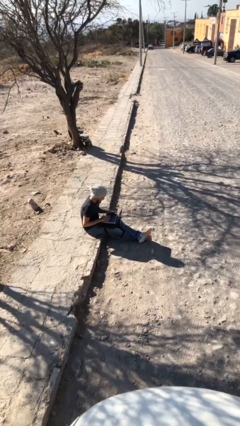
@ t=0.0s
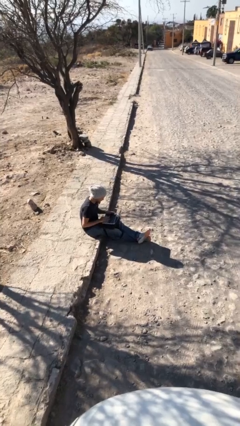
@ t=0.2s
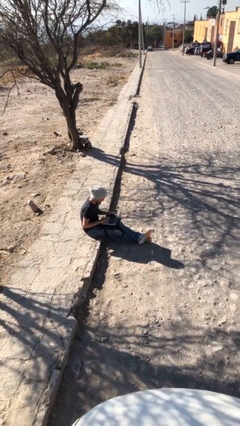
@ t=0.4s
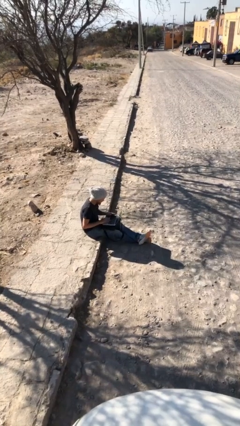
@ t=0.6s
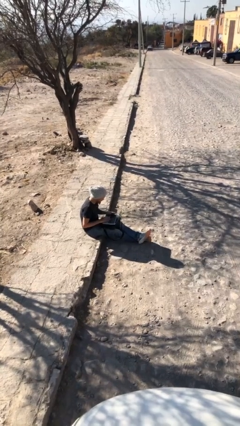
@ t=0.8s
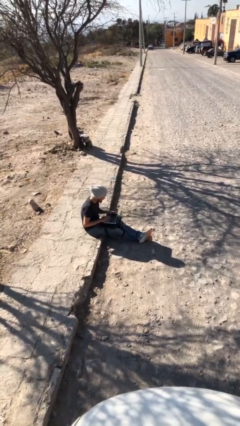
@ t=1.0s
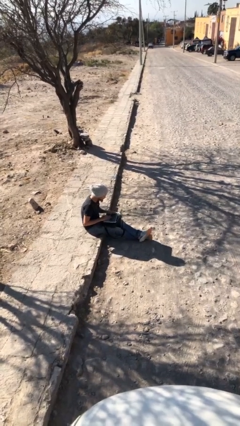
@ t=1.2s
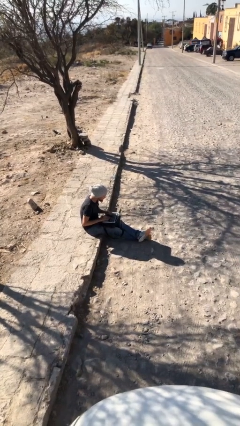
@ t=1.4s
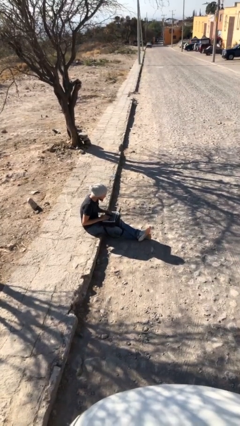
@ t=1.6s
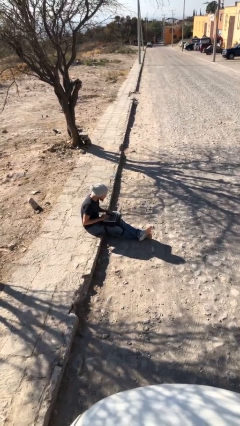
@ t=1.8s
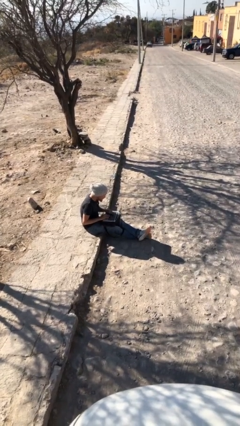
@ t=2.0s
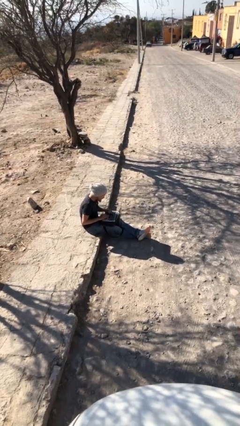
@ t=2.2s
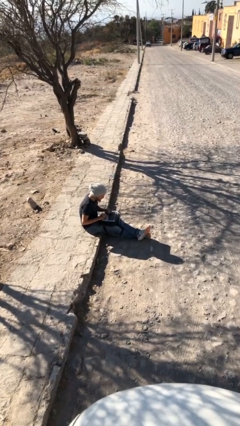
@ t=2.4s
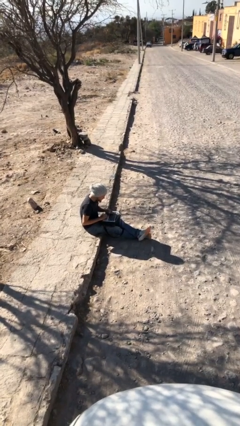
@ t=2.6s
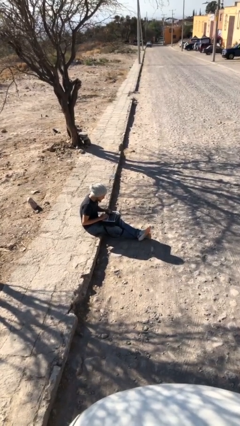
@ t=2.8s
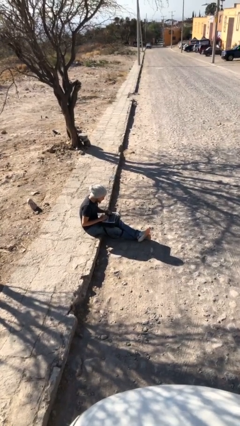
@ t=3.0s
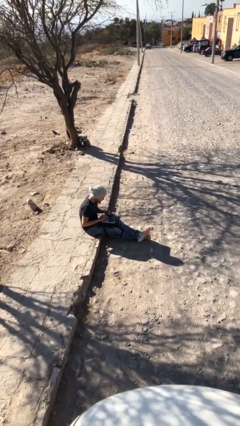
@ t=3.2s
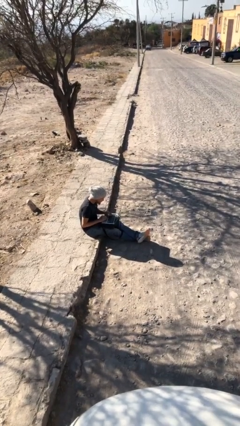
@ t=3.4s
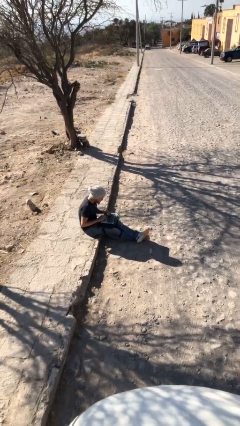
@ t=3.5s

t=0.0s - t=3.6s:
person interacts with laptop

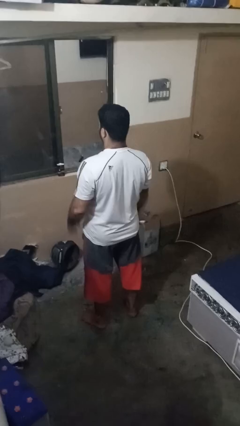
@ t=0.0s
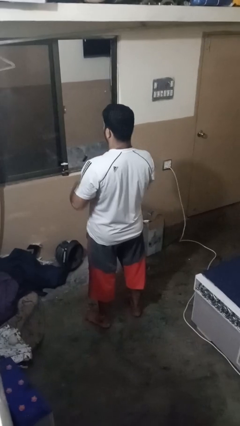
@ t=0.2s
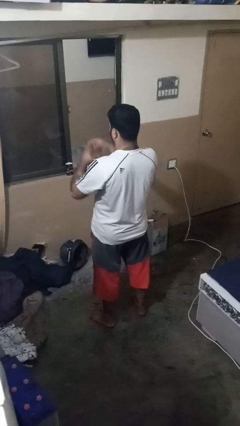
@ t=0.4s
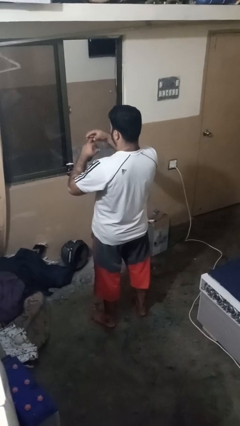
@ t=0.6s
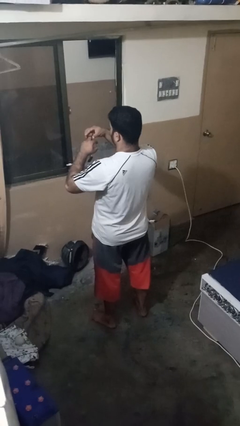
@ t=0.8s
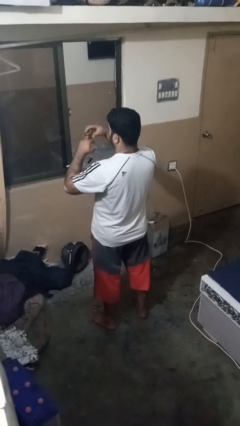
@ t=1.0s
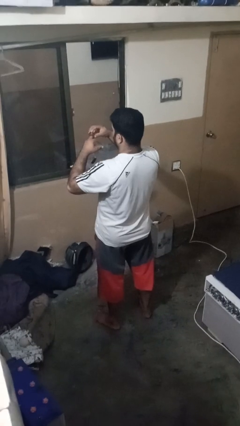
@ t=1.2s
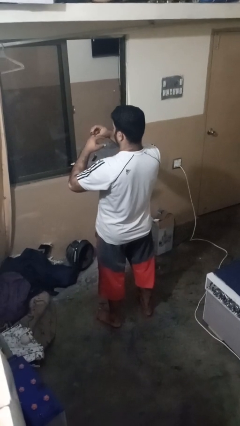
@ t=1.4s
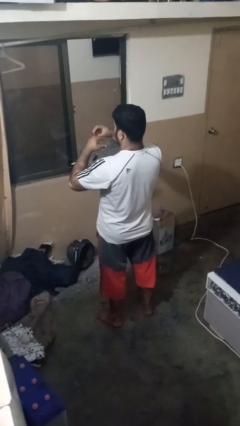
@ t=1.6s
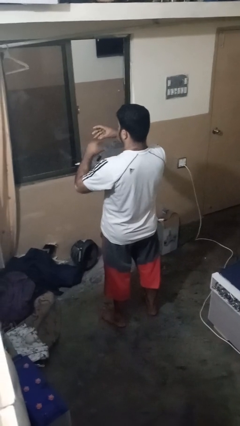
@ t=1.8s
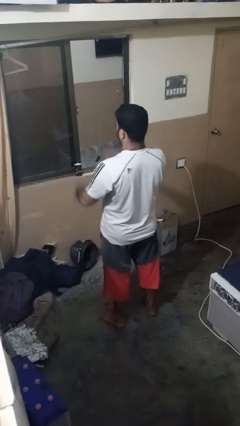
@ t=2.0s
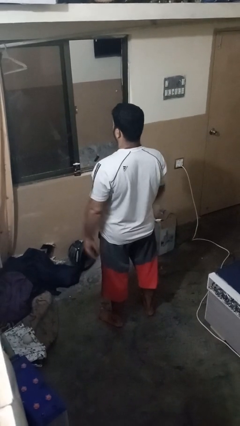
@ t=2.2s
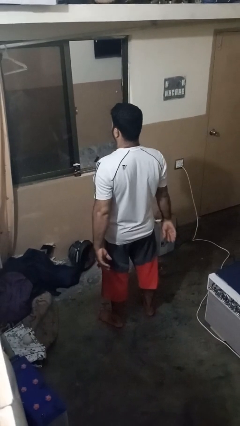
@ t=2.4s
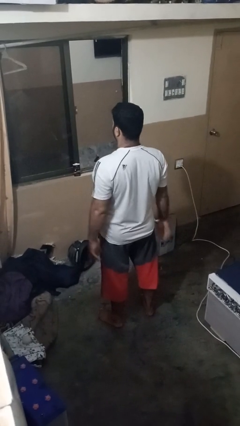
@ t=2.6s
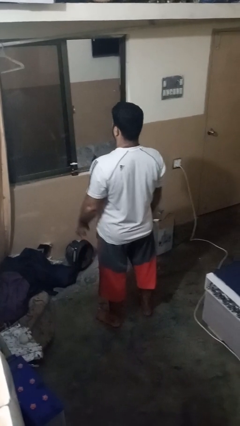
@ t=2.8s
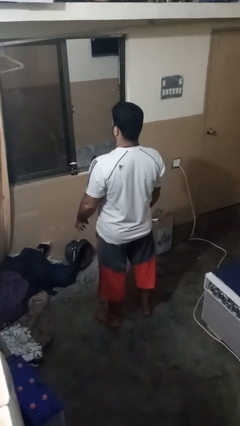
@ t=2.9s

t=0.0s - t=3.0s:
person puts on ring

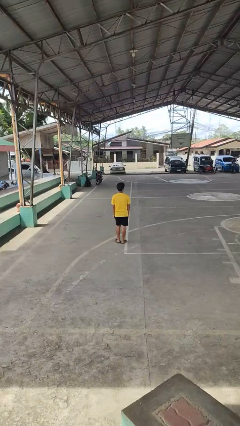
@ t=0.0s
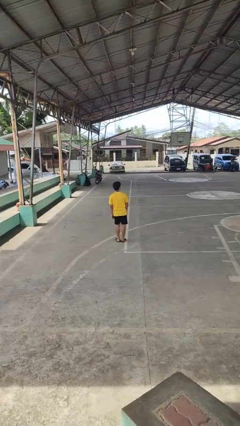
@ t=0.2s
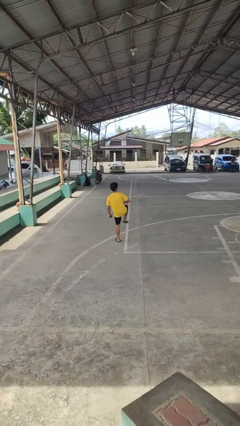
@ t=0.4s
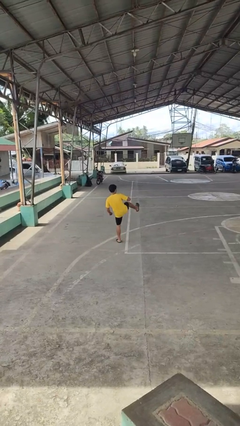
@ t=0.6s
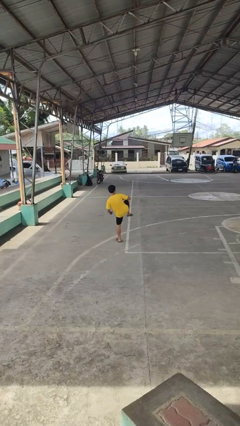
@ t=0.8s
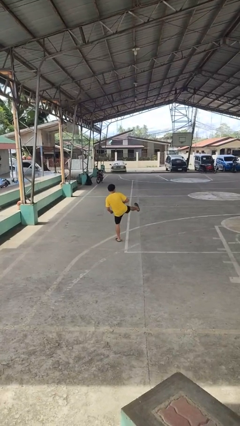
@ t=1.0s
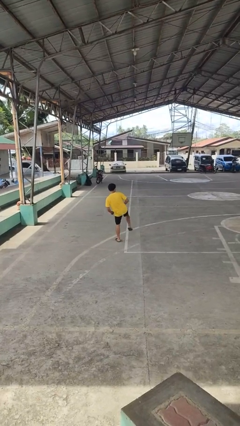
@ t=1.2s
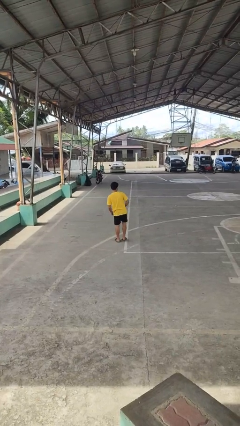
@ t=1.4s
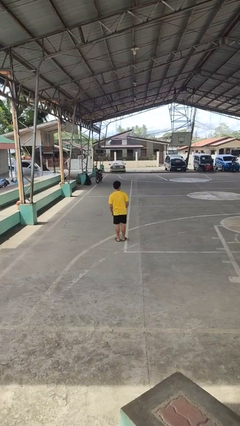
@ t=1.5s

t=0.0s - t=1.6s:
person karate kicks

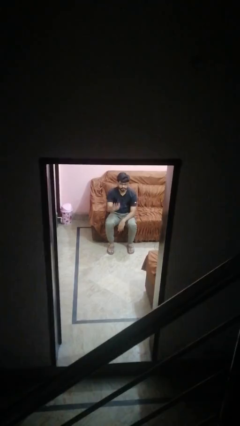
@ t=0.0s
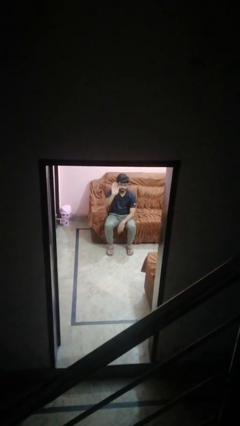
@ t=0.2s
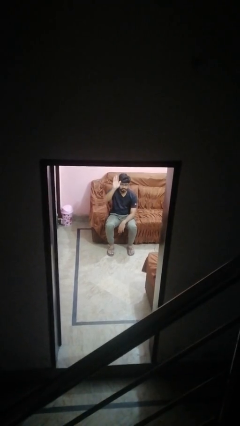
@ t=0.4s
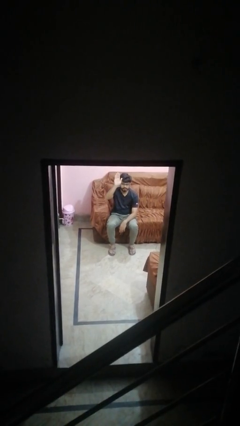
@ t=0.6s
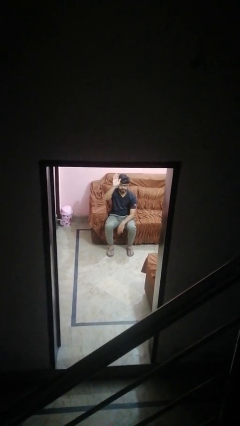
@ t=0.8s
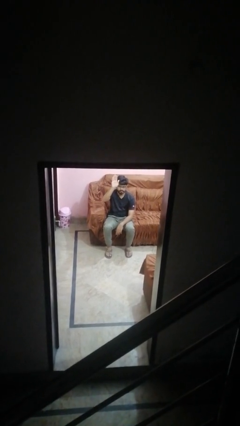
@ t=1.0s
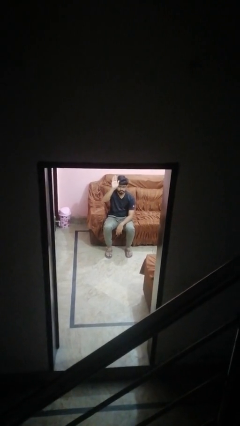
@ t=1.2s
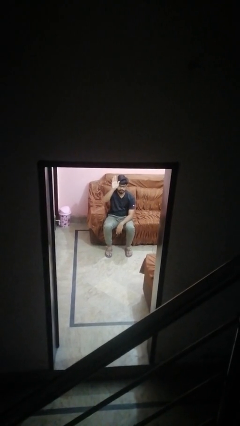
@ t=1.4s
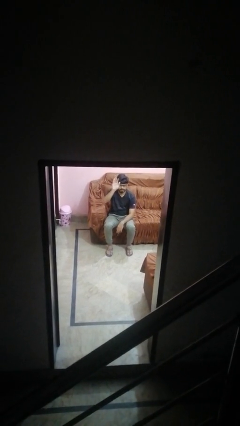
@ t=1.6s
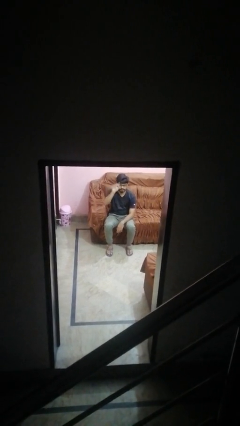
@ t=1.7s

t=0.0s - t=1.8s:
person gestures raise hand

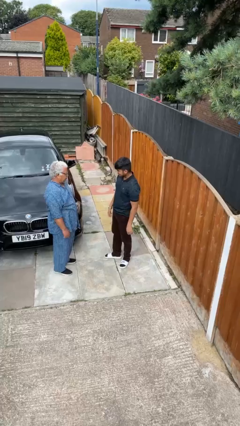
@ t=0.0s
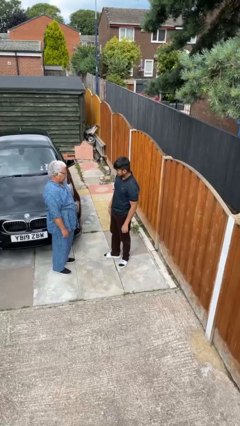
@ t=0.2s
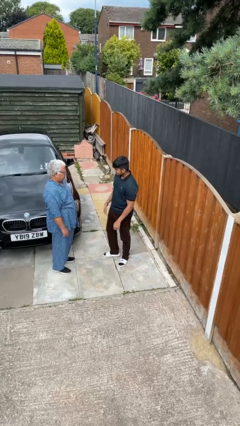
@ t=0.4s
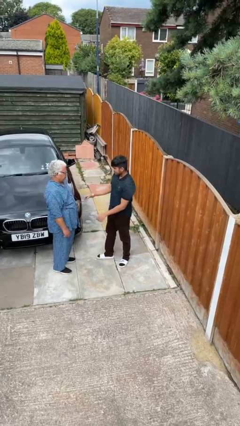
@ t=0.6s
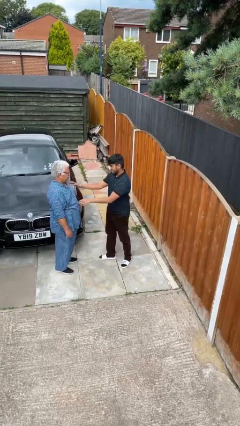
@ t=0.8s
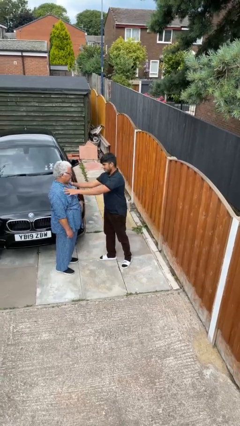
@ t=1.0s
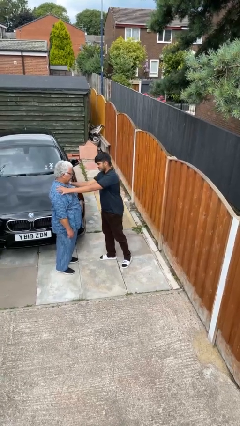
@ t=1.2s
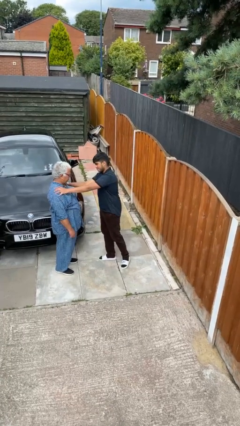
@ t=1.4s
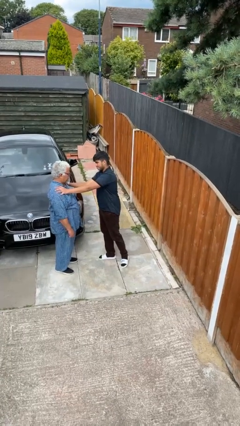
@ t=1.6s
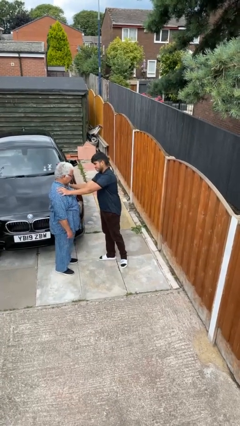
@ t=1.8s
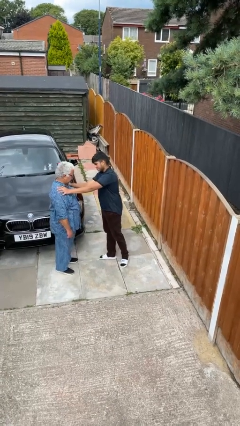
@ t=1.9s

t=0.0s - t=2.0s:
person shoves person

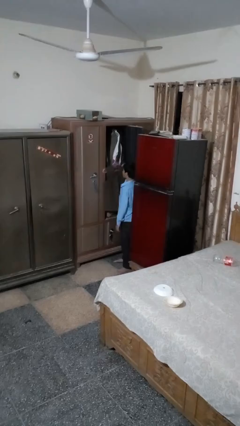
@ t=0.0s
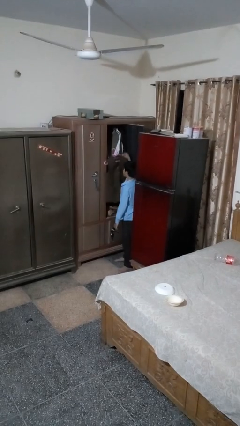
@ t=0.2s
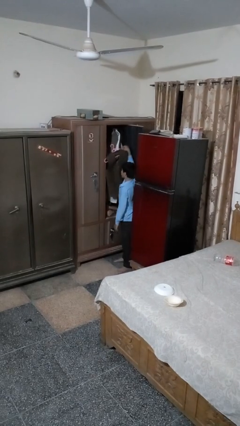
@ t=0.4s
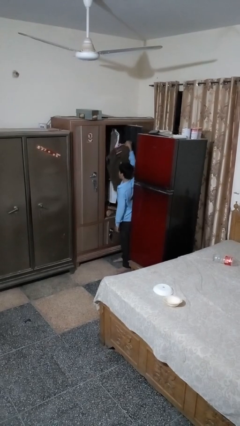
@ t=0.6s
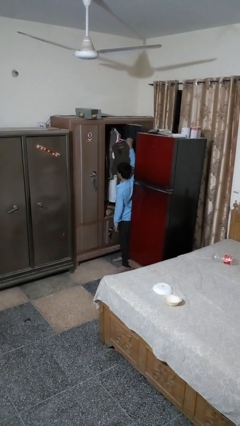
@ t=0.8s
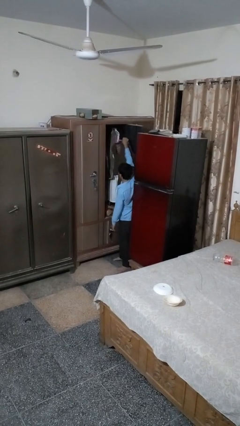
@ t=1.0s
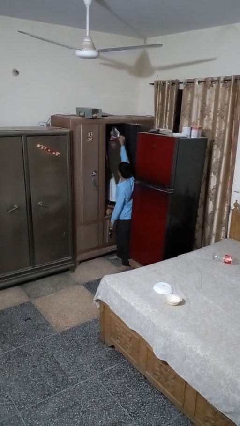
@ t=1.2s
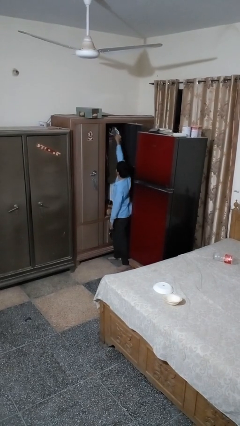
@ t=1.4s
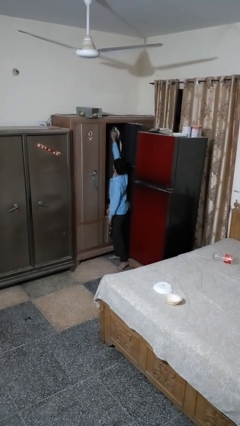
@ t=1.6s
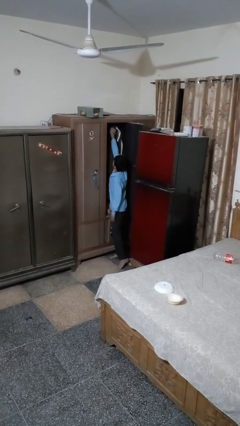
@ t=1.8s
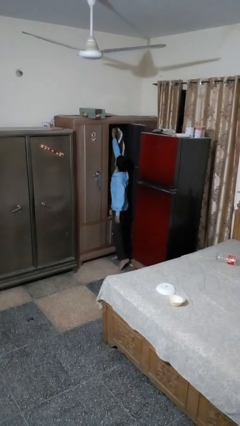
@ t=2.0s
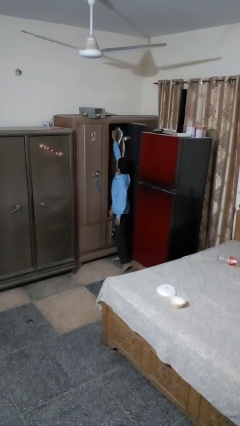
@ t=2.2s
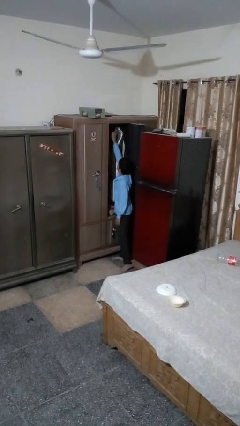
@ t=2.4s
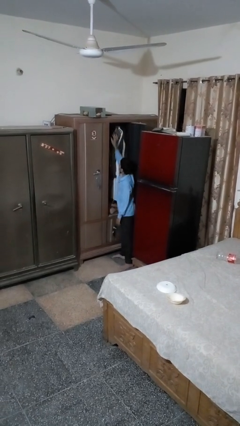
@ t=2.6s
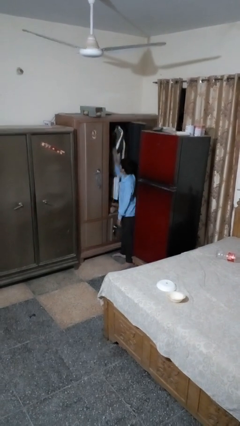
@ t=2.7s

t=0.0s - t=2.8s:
person puts clothes into closet

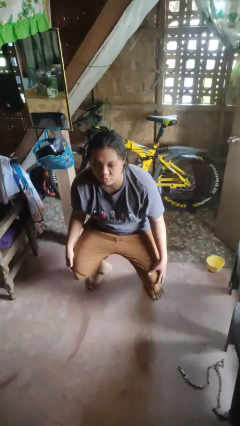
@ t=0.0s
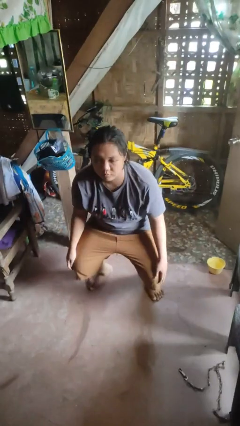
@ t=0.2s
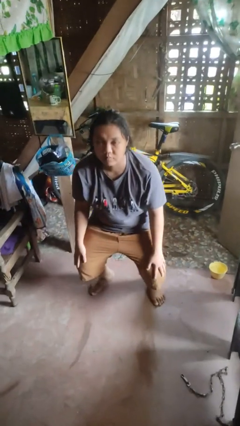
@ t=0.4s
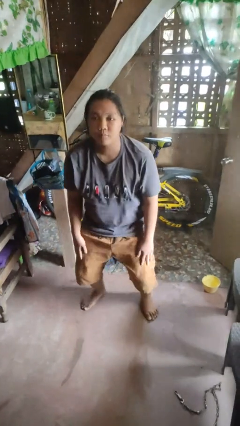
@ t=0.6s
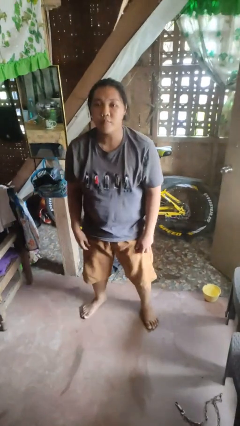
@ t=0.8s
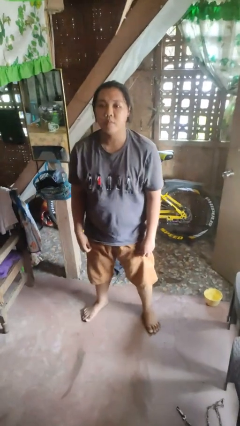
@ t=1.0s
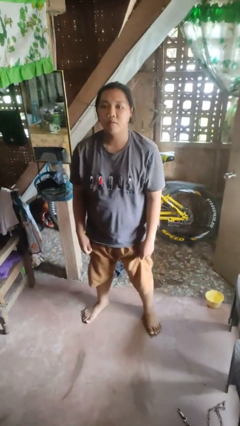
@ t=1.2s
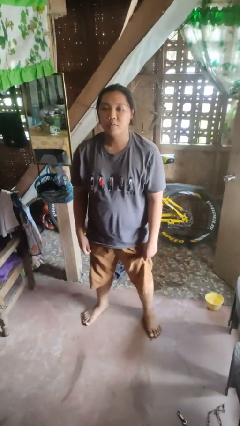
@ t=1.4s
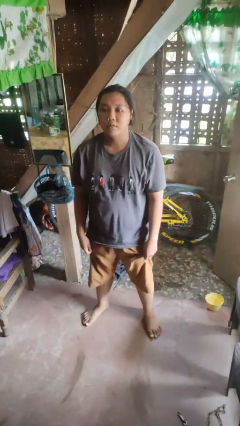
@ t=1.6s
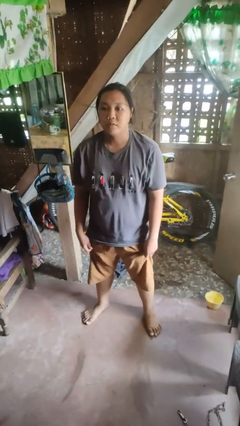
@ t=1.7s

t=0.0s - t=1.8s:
person stands up

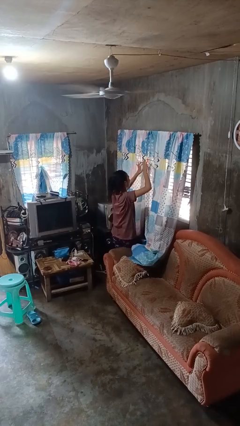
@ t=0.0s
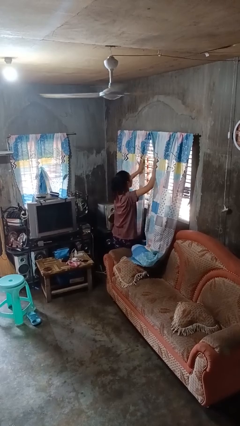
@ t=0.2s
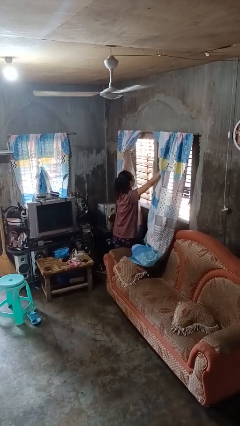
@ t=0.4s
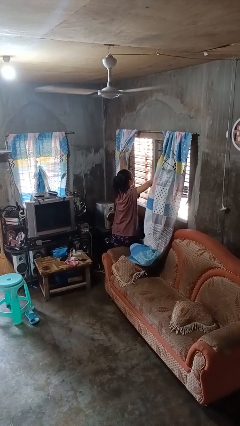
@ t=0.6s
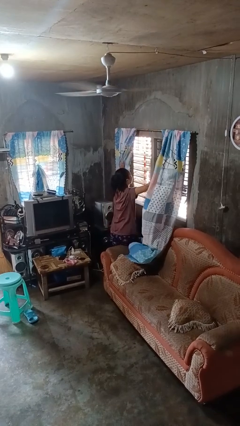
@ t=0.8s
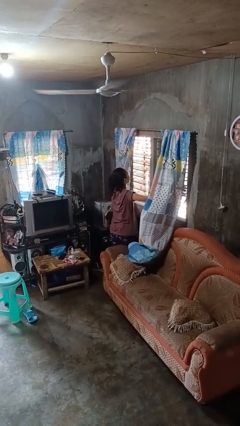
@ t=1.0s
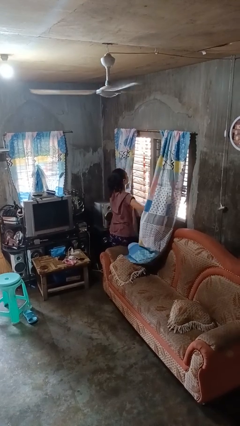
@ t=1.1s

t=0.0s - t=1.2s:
person opens curtains
